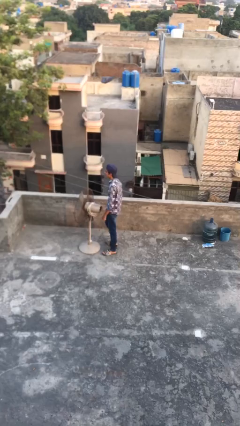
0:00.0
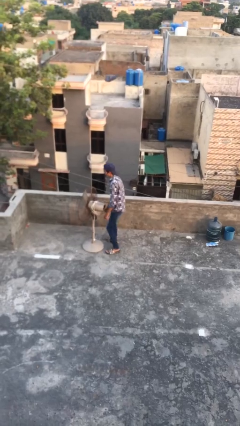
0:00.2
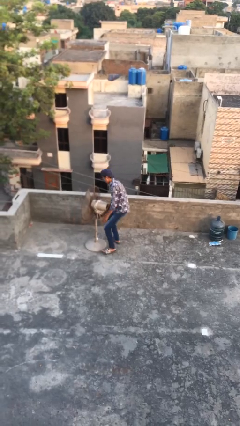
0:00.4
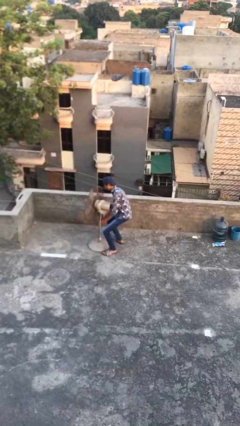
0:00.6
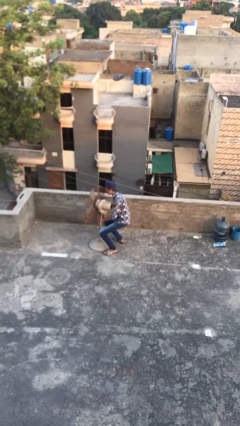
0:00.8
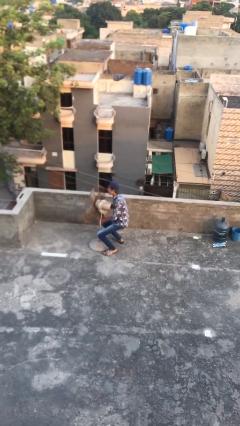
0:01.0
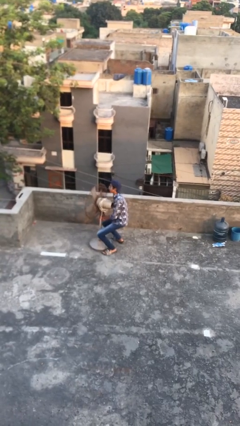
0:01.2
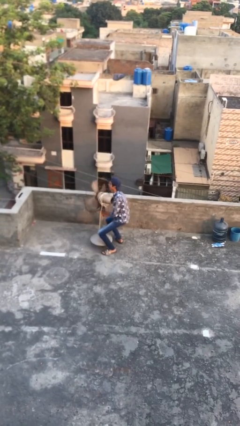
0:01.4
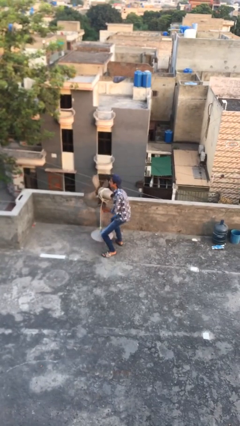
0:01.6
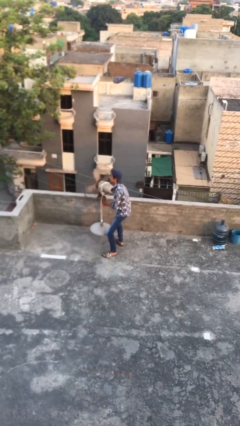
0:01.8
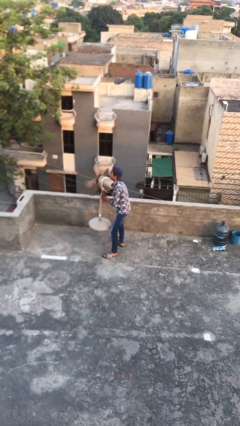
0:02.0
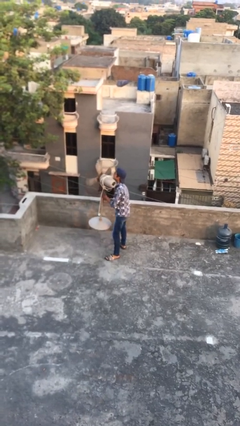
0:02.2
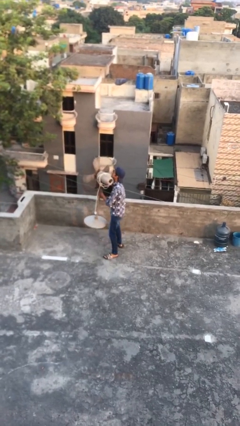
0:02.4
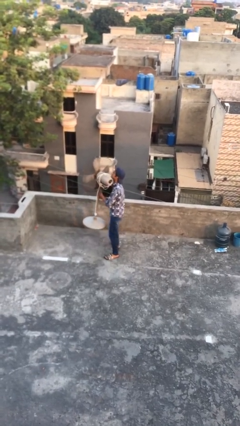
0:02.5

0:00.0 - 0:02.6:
person picks up object from floor

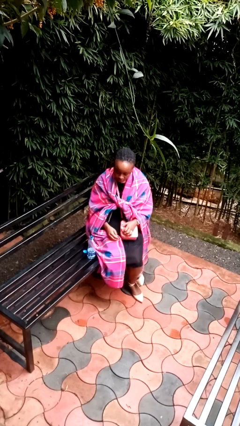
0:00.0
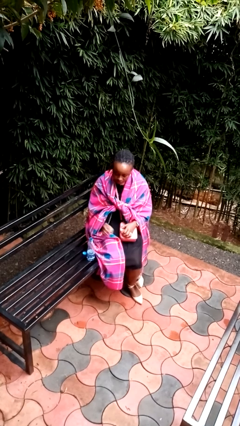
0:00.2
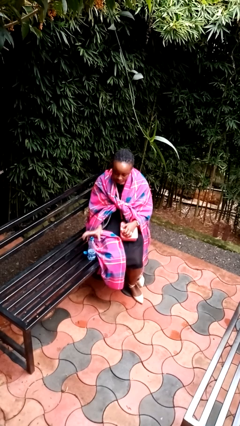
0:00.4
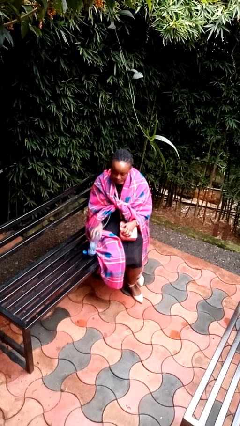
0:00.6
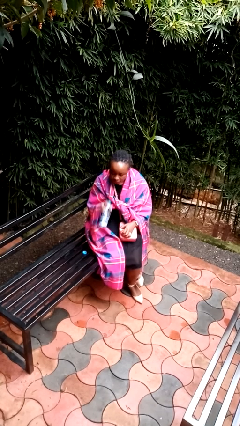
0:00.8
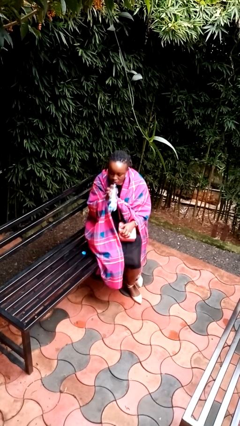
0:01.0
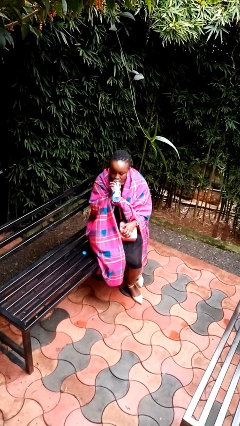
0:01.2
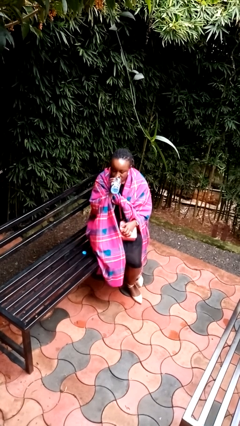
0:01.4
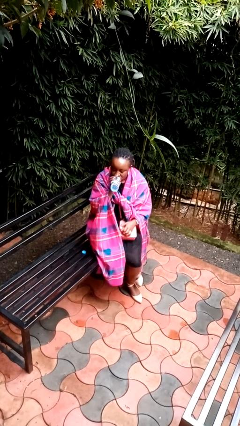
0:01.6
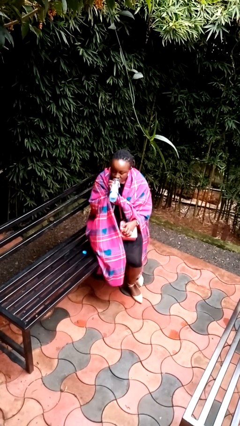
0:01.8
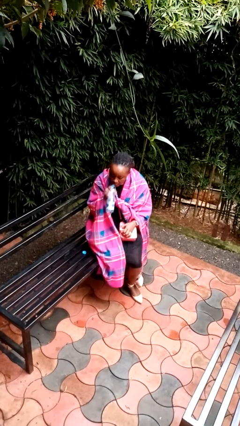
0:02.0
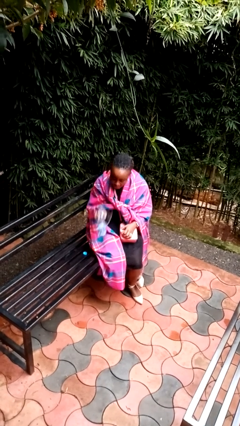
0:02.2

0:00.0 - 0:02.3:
person drinks from cup

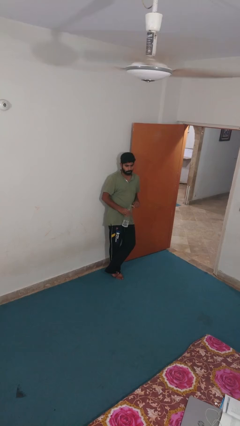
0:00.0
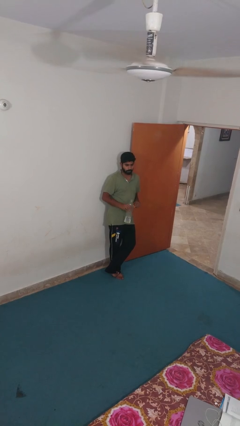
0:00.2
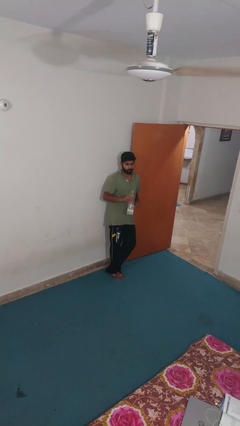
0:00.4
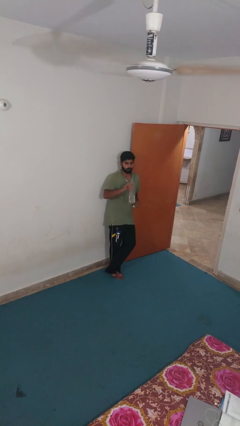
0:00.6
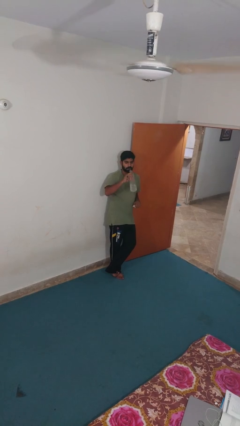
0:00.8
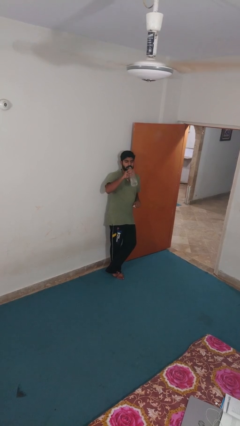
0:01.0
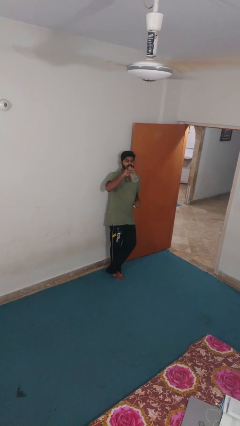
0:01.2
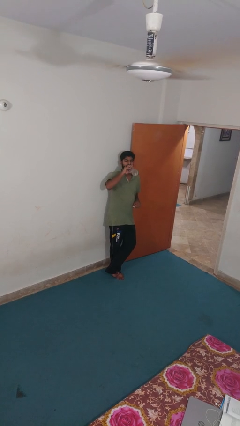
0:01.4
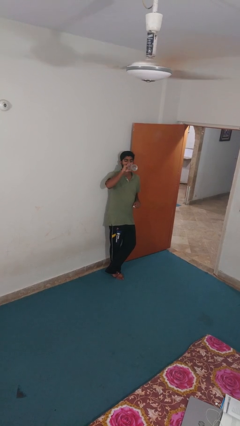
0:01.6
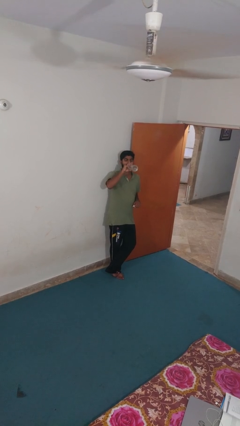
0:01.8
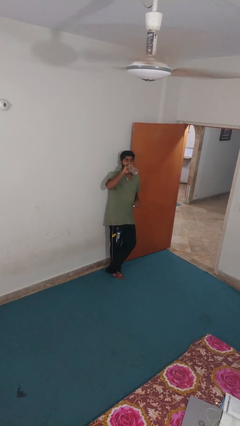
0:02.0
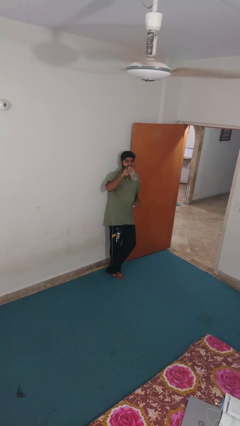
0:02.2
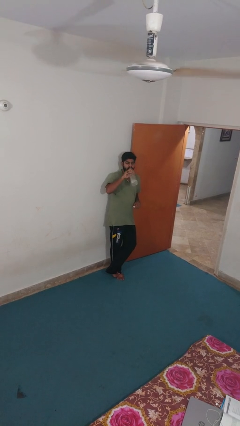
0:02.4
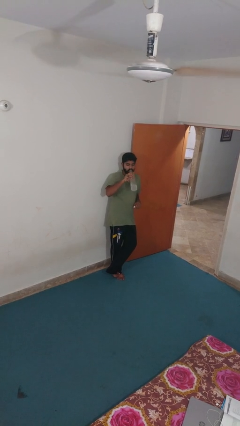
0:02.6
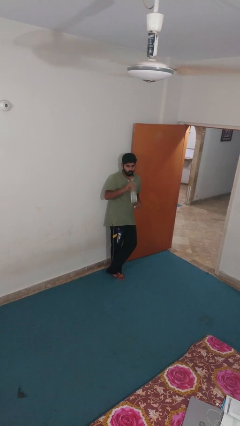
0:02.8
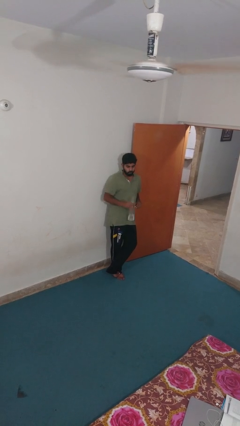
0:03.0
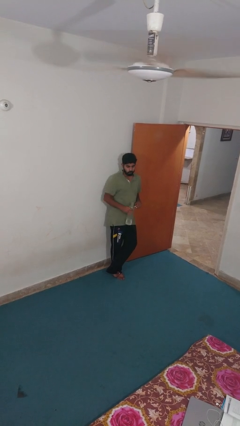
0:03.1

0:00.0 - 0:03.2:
person drinks from bottle

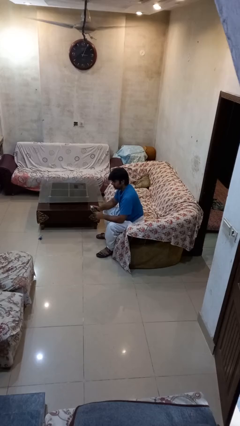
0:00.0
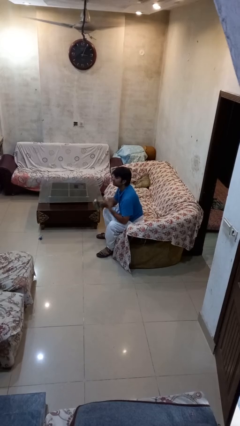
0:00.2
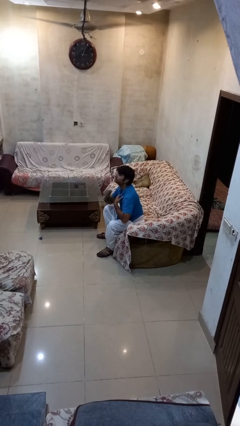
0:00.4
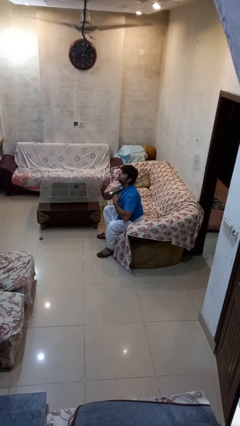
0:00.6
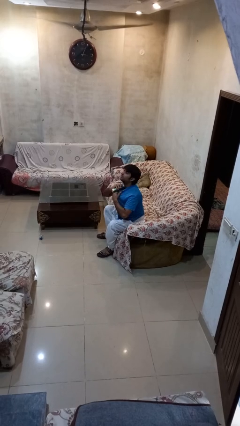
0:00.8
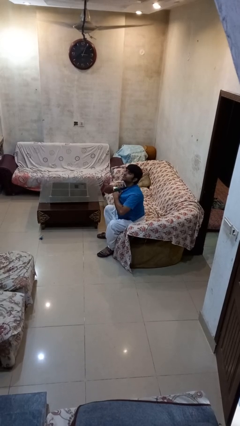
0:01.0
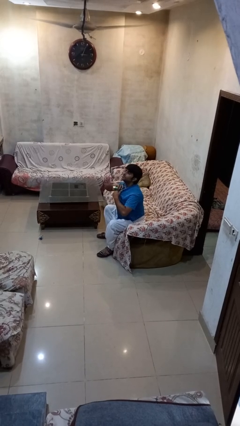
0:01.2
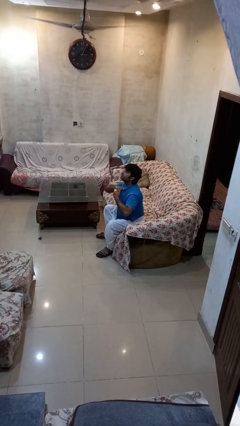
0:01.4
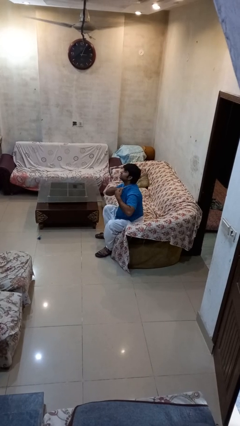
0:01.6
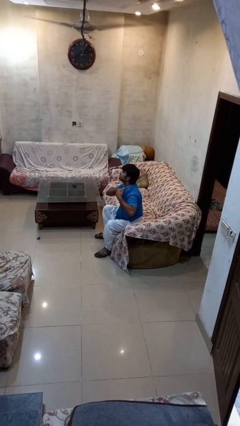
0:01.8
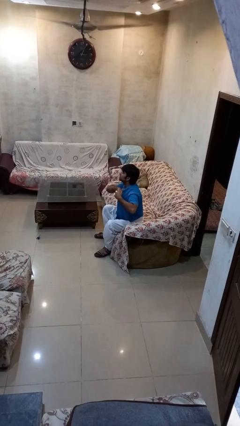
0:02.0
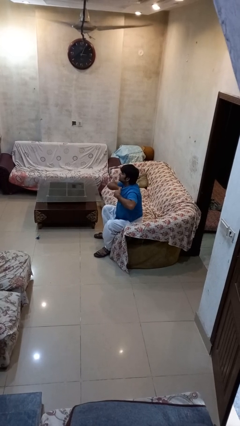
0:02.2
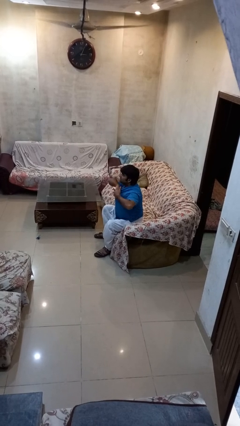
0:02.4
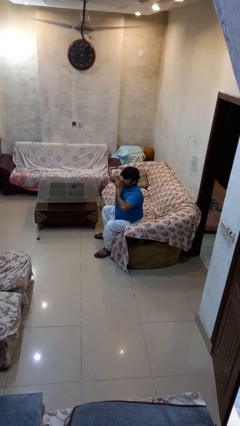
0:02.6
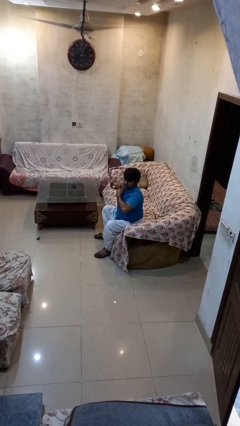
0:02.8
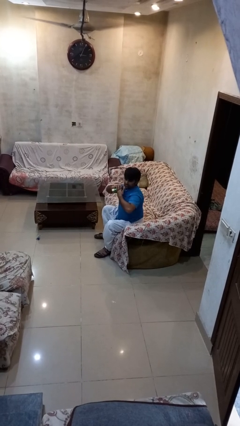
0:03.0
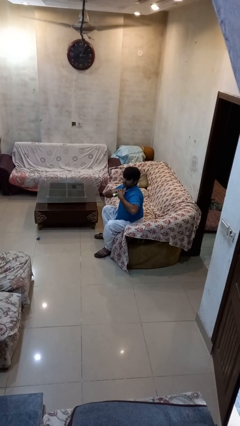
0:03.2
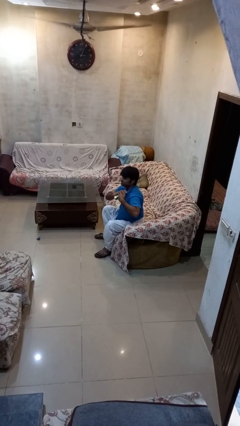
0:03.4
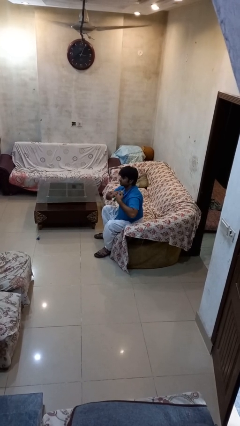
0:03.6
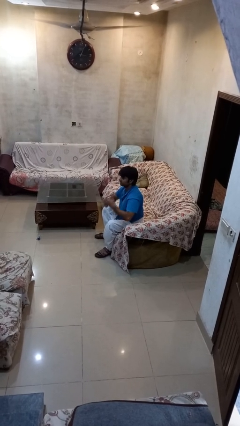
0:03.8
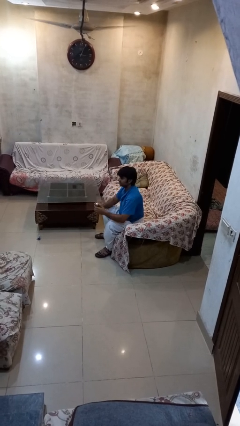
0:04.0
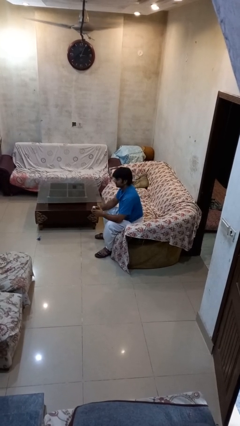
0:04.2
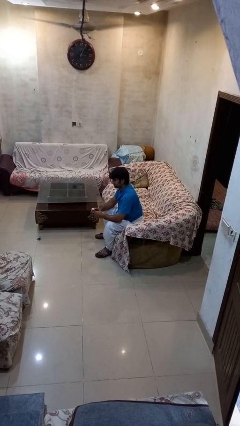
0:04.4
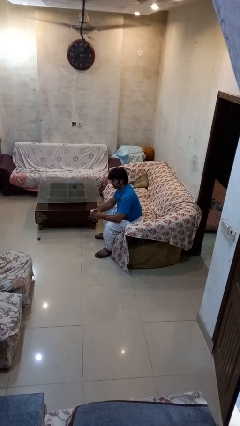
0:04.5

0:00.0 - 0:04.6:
person applies deodorant

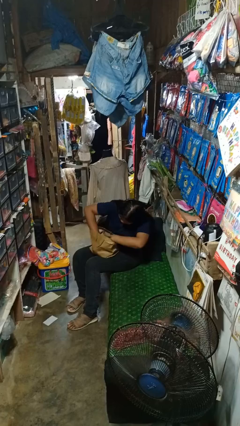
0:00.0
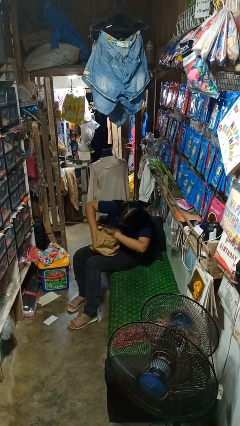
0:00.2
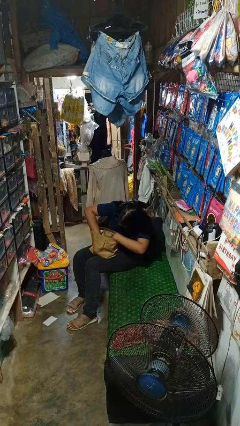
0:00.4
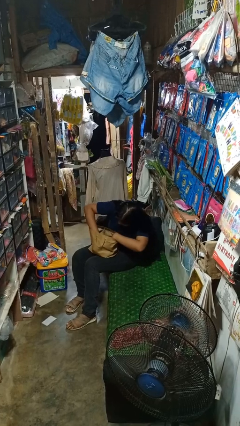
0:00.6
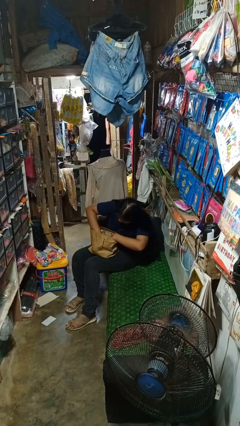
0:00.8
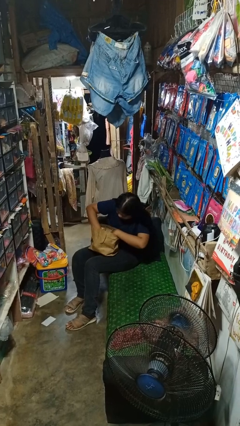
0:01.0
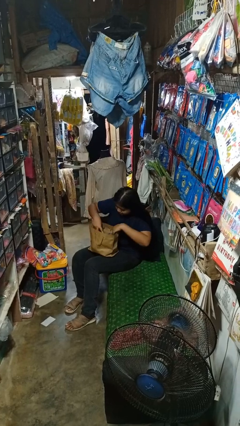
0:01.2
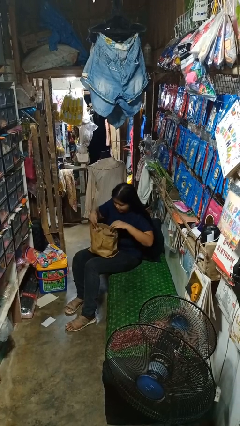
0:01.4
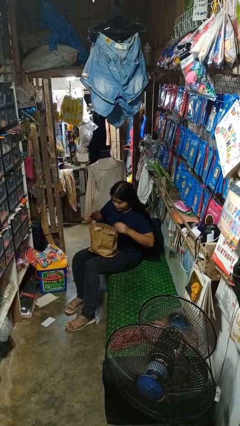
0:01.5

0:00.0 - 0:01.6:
person searches in bag

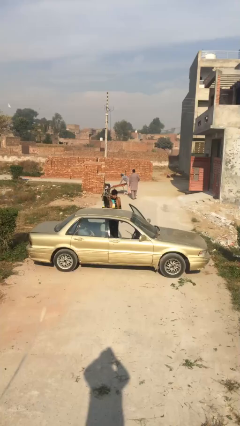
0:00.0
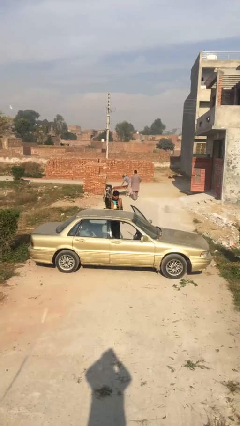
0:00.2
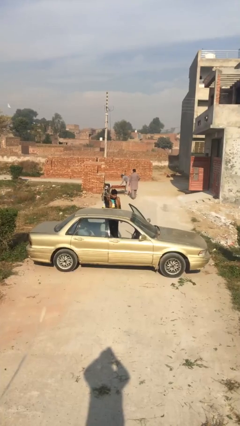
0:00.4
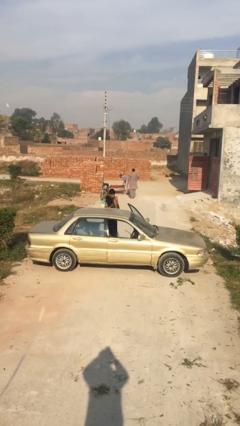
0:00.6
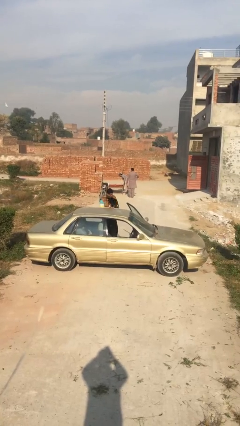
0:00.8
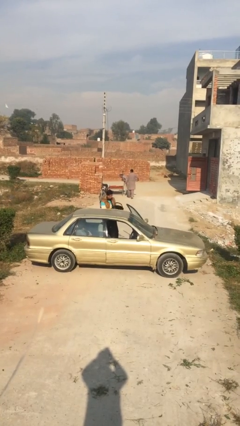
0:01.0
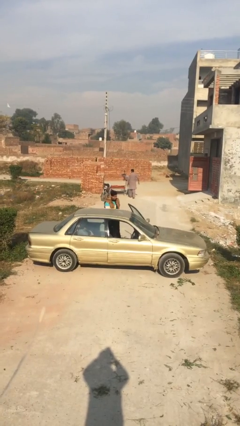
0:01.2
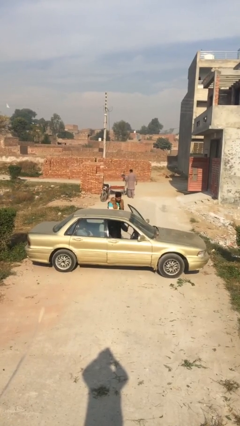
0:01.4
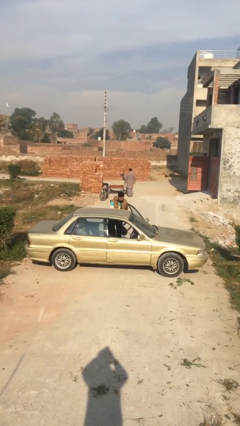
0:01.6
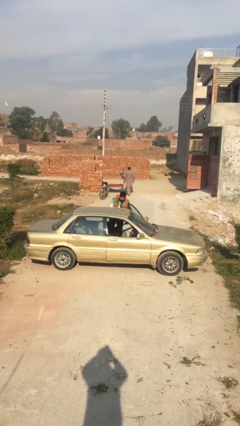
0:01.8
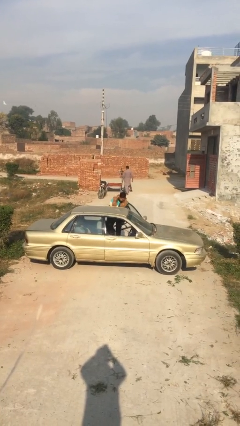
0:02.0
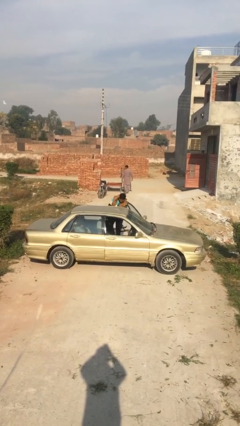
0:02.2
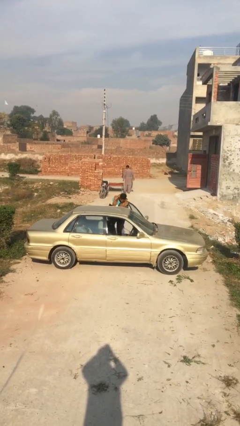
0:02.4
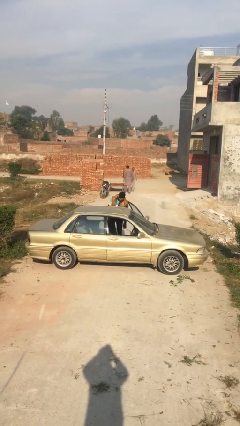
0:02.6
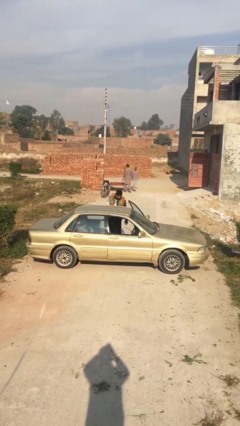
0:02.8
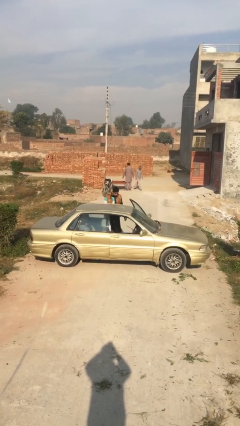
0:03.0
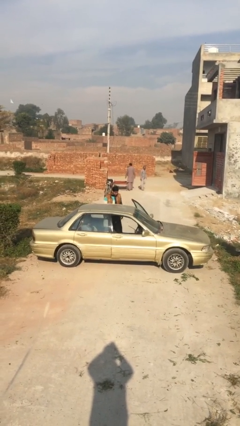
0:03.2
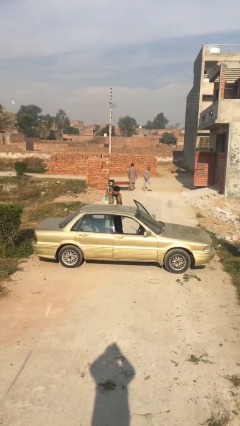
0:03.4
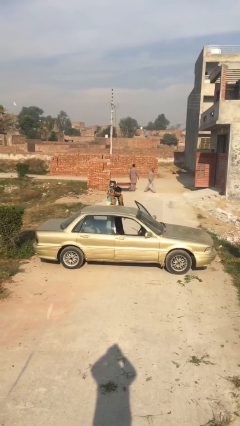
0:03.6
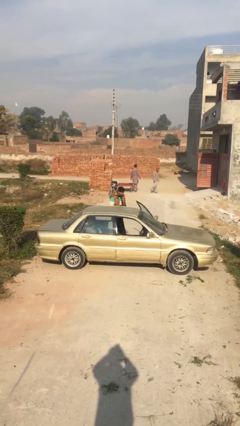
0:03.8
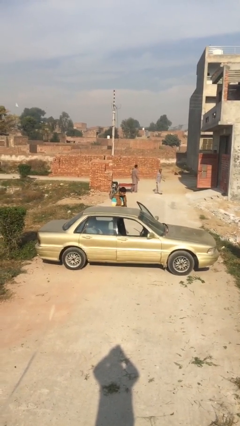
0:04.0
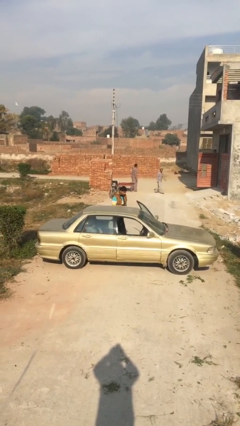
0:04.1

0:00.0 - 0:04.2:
person loads car
